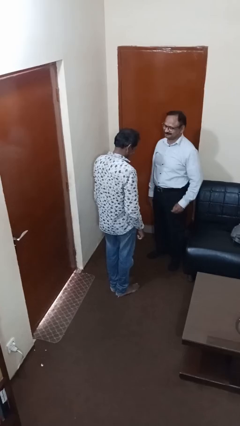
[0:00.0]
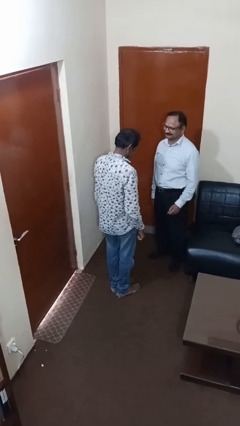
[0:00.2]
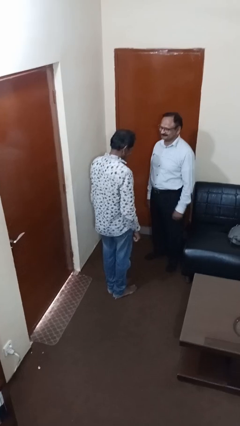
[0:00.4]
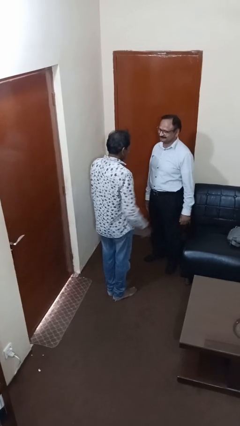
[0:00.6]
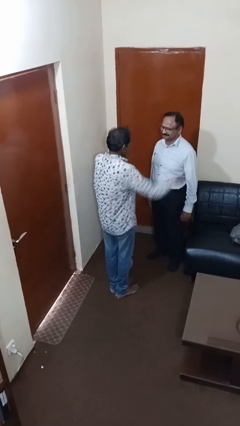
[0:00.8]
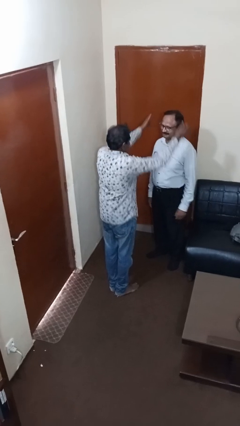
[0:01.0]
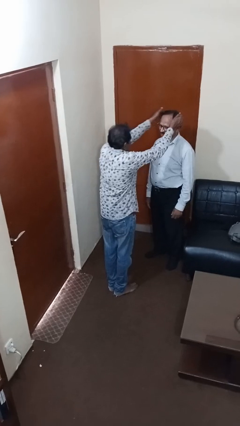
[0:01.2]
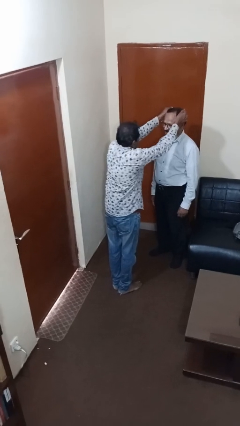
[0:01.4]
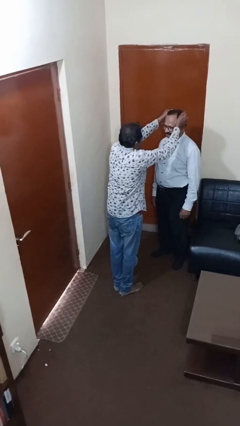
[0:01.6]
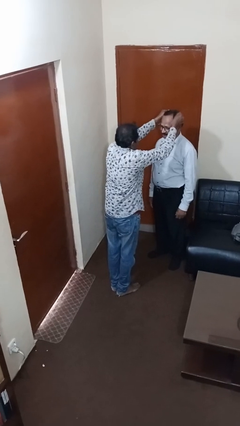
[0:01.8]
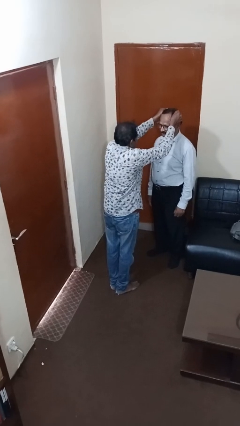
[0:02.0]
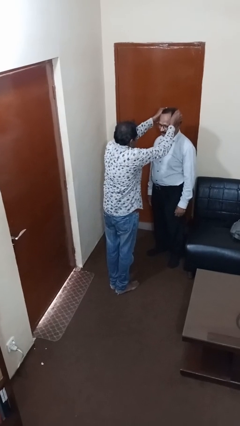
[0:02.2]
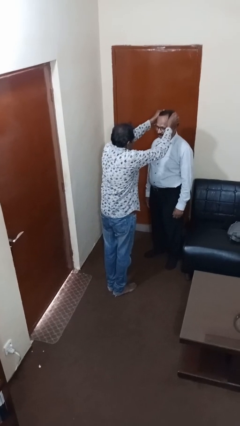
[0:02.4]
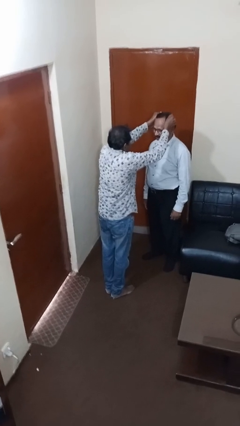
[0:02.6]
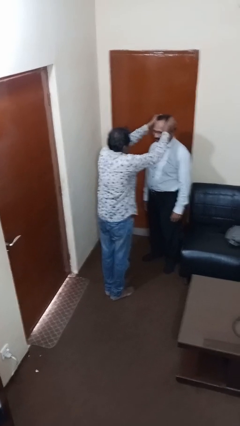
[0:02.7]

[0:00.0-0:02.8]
person grabs person by hair

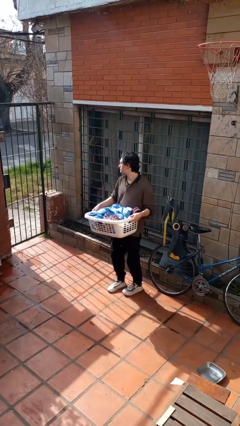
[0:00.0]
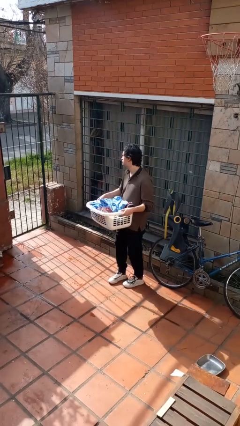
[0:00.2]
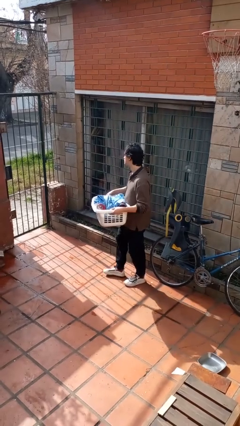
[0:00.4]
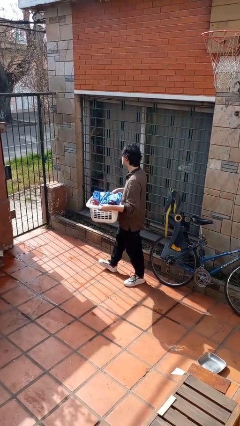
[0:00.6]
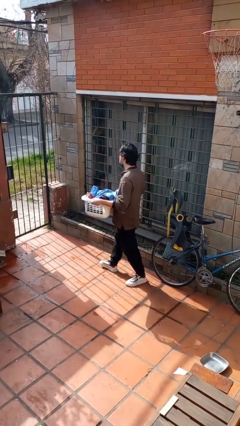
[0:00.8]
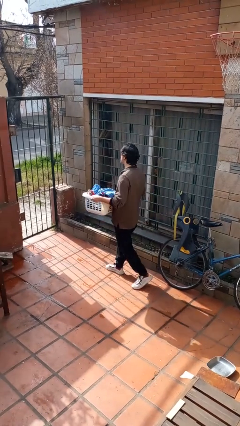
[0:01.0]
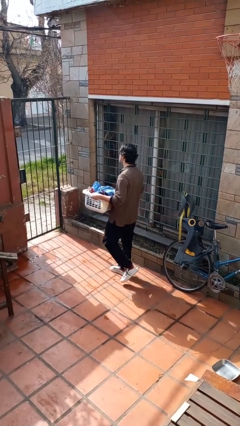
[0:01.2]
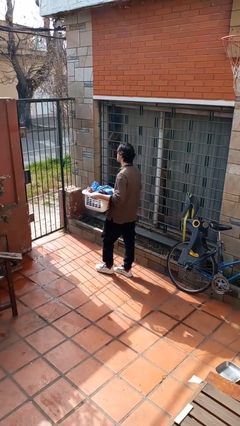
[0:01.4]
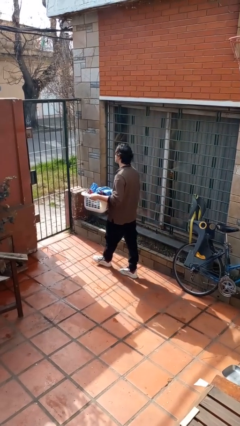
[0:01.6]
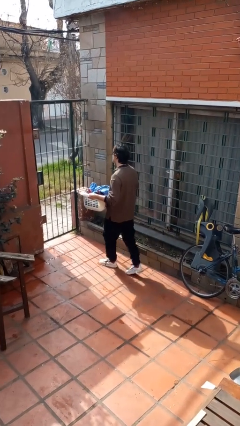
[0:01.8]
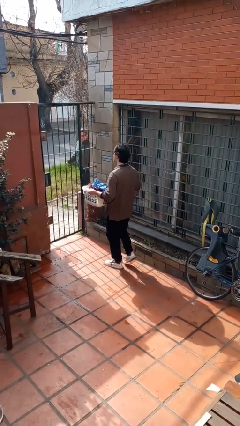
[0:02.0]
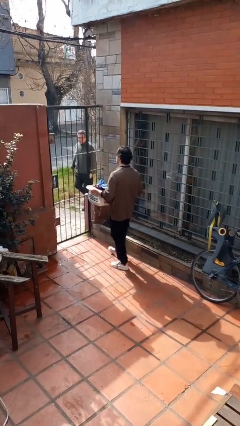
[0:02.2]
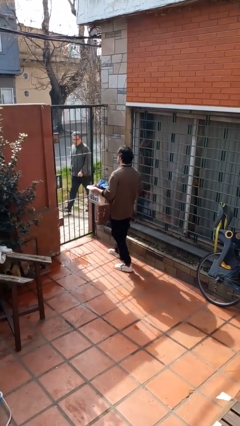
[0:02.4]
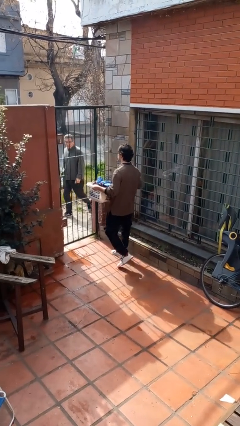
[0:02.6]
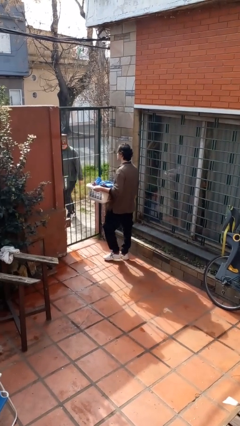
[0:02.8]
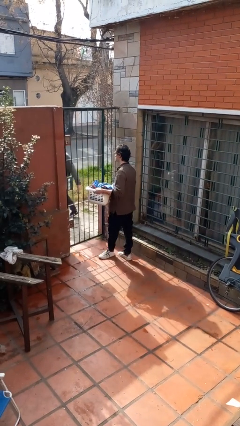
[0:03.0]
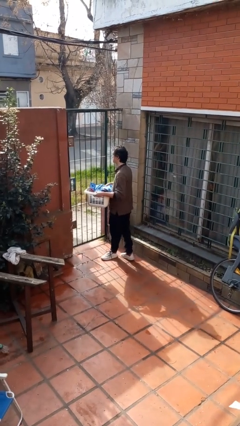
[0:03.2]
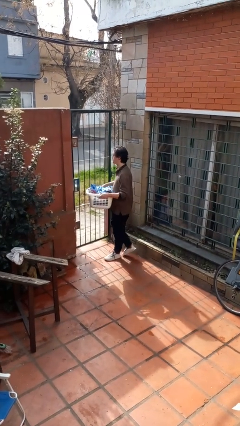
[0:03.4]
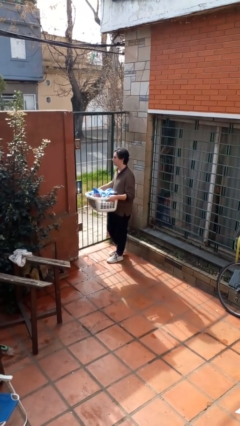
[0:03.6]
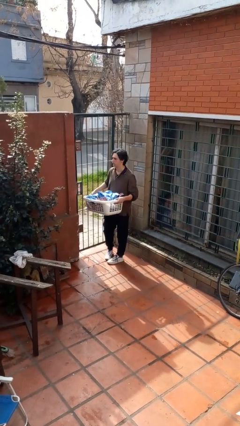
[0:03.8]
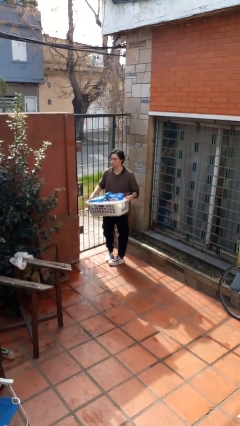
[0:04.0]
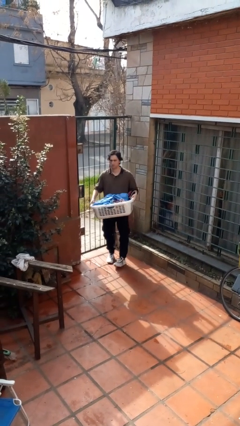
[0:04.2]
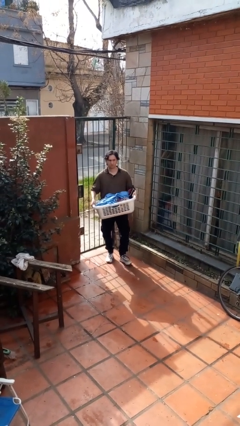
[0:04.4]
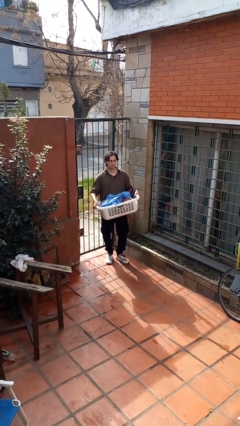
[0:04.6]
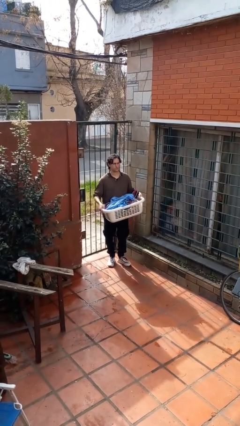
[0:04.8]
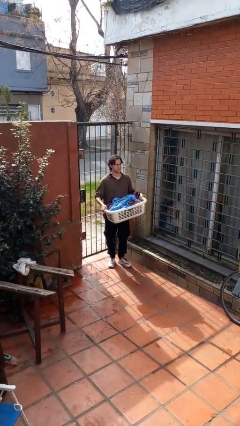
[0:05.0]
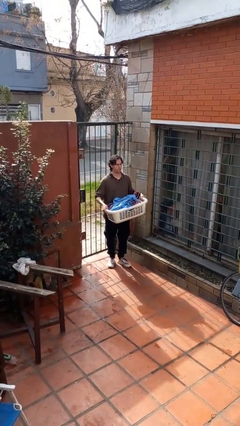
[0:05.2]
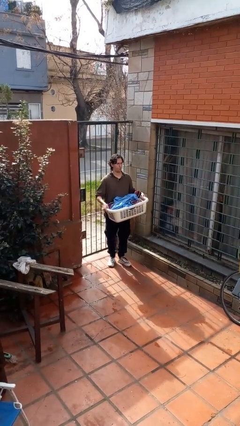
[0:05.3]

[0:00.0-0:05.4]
person carries laundry basket

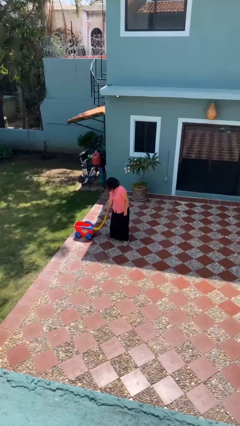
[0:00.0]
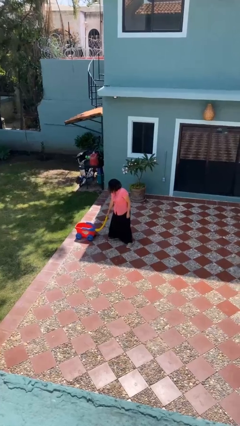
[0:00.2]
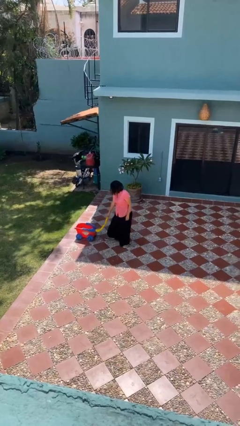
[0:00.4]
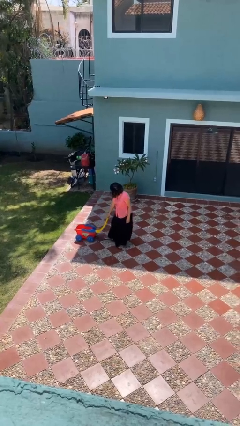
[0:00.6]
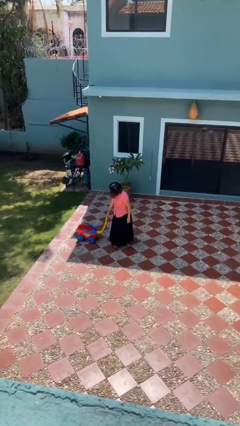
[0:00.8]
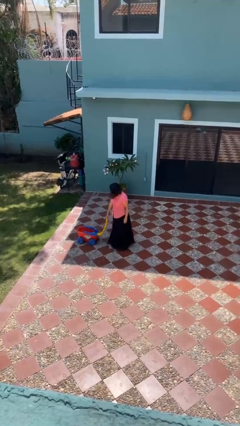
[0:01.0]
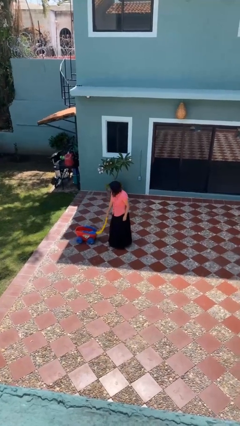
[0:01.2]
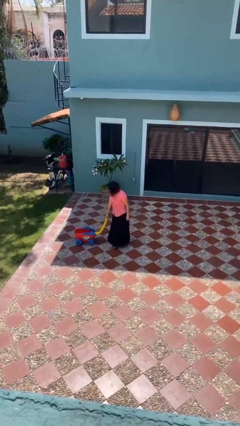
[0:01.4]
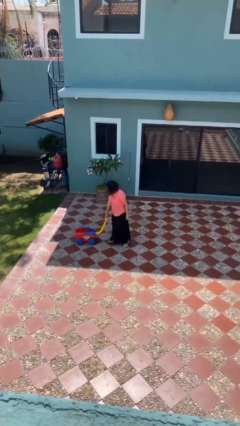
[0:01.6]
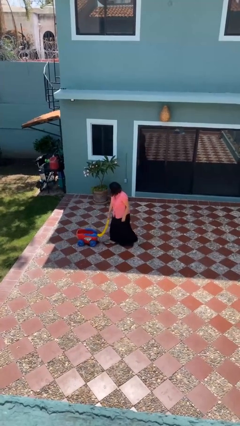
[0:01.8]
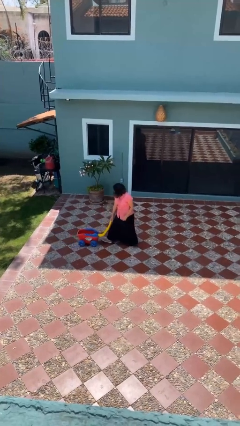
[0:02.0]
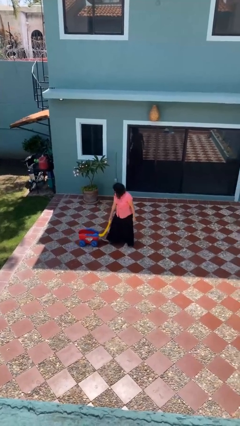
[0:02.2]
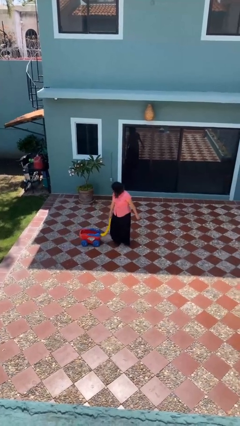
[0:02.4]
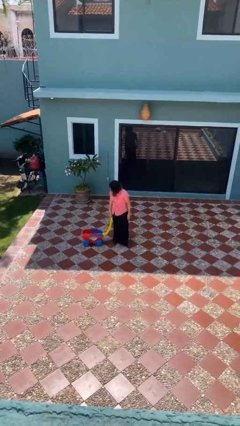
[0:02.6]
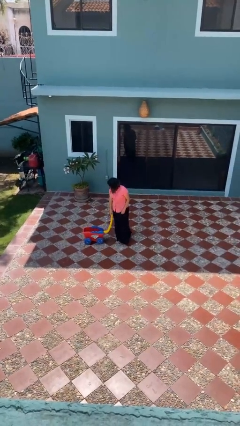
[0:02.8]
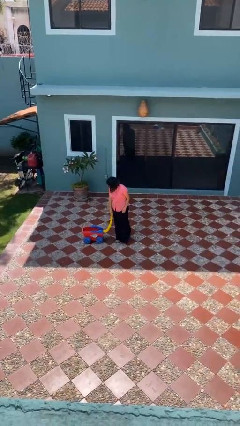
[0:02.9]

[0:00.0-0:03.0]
person pulls wheeled cart

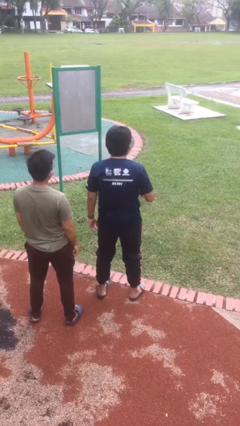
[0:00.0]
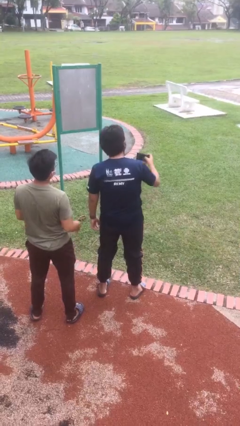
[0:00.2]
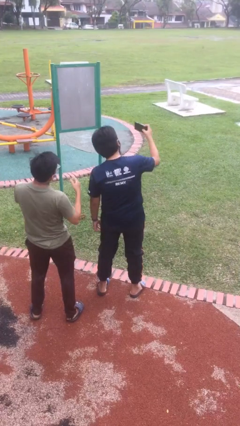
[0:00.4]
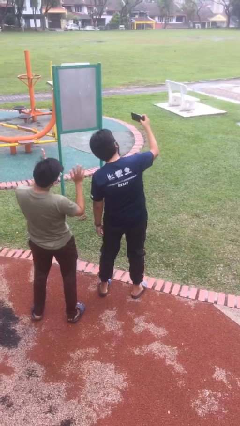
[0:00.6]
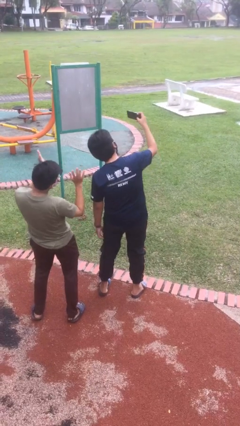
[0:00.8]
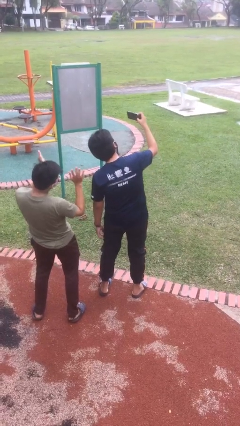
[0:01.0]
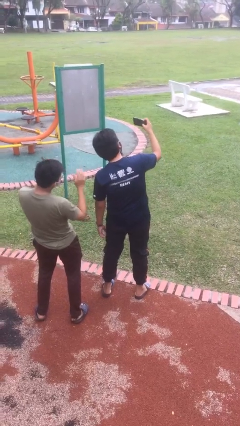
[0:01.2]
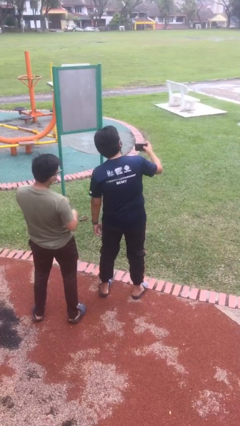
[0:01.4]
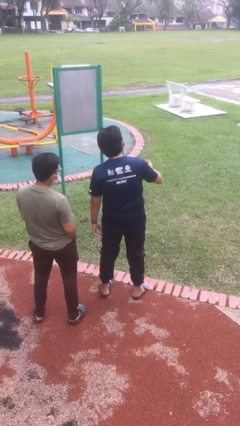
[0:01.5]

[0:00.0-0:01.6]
person takes selfie with person

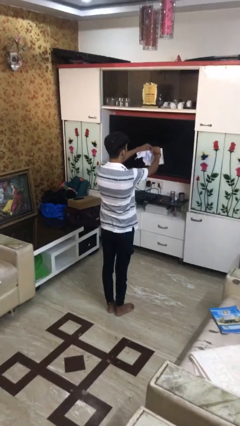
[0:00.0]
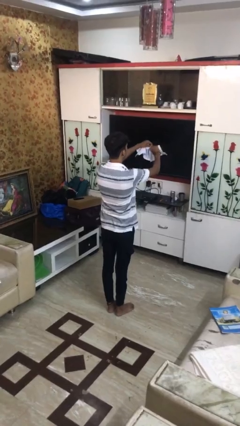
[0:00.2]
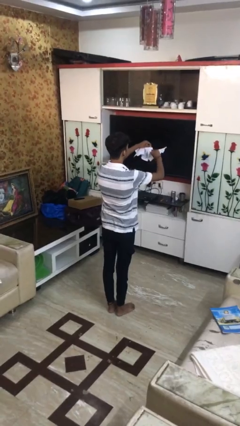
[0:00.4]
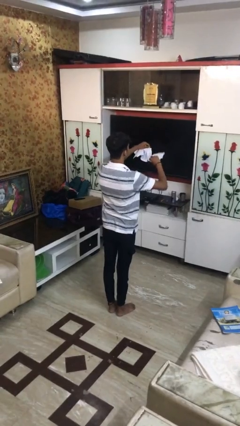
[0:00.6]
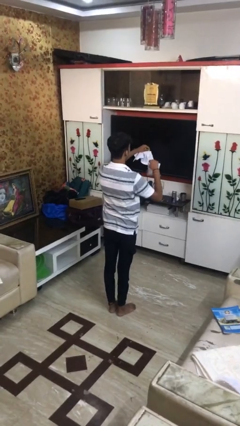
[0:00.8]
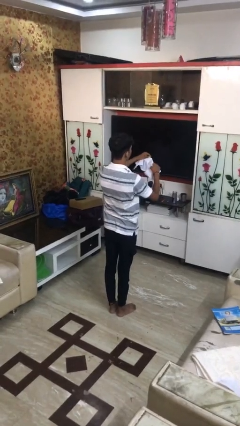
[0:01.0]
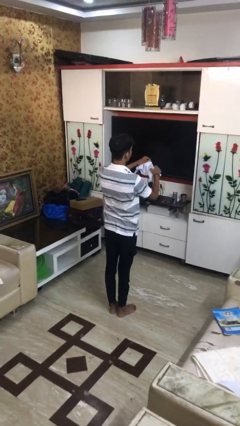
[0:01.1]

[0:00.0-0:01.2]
person tears paper

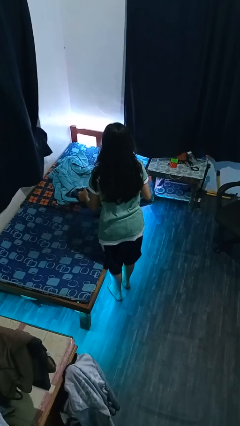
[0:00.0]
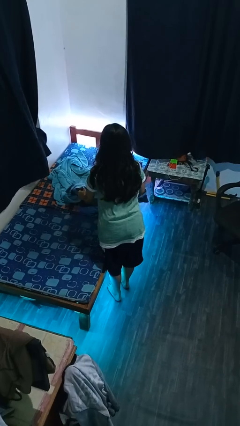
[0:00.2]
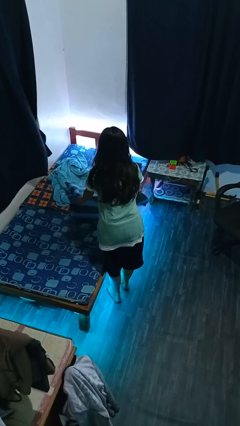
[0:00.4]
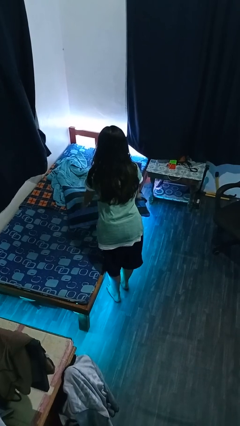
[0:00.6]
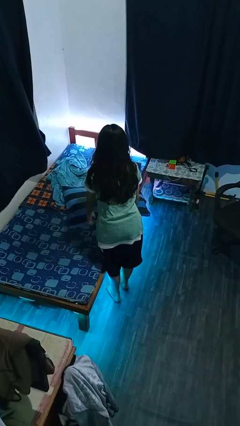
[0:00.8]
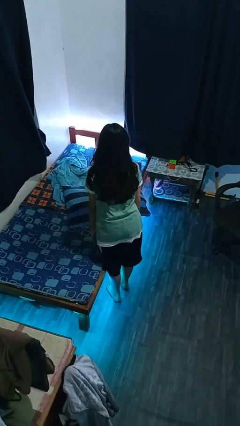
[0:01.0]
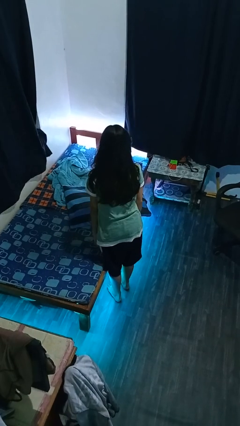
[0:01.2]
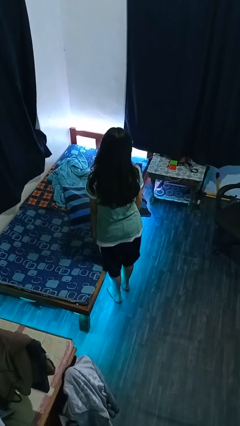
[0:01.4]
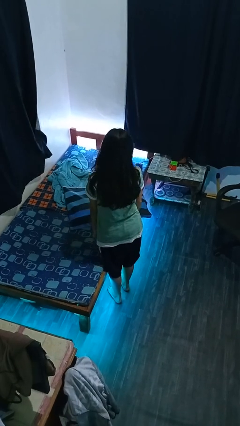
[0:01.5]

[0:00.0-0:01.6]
person puts down object on bed

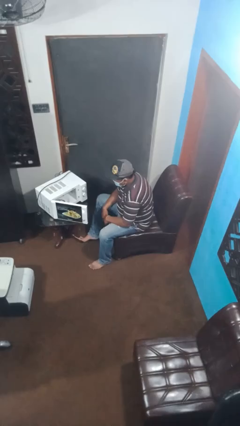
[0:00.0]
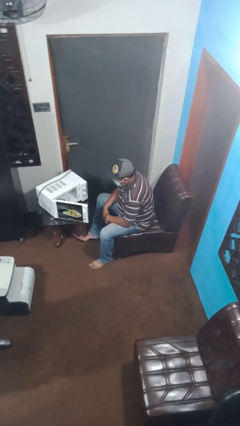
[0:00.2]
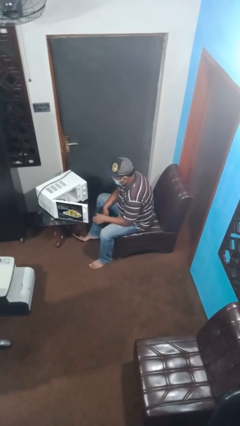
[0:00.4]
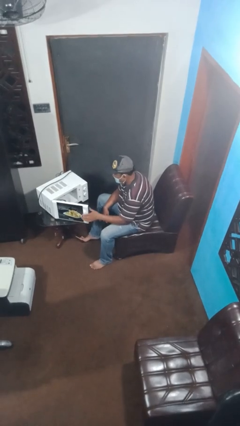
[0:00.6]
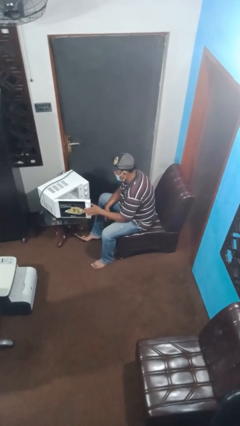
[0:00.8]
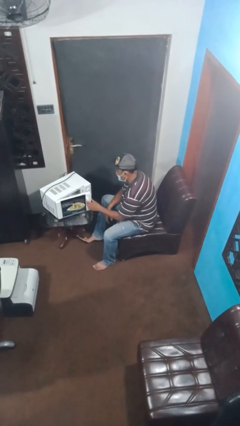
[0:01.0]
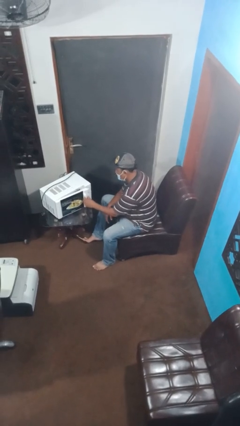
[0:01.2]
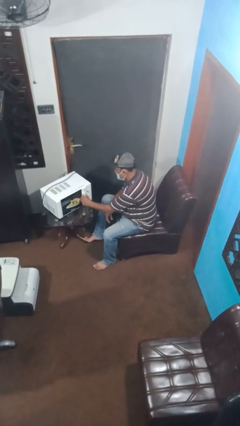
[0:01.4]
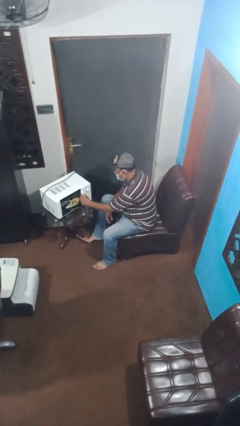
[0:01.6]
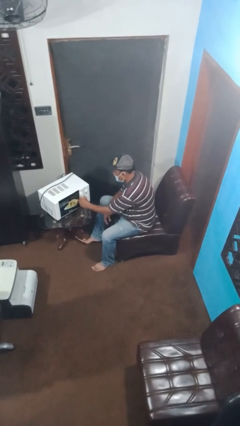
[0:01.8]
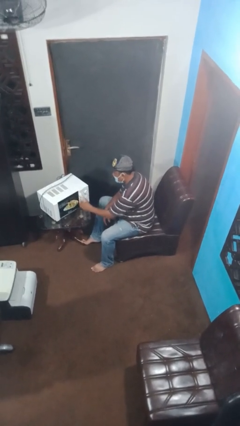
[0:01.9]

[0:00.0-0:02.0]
person closes microwave
